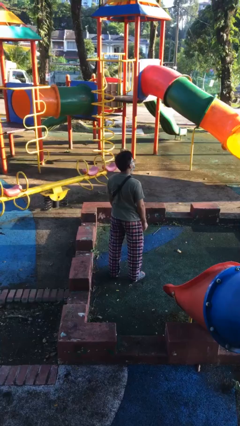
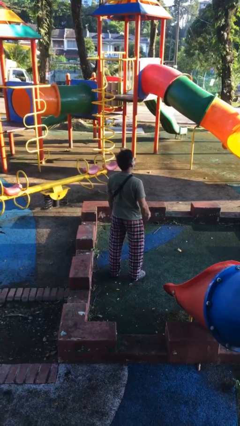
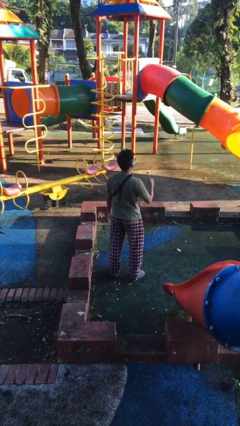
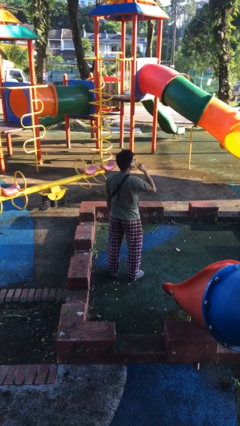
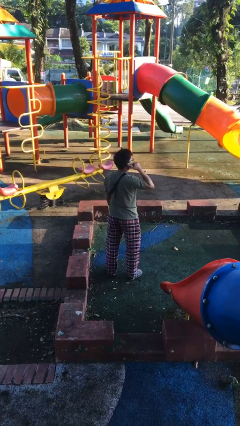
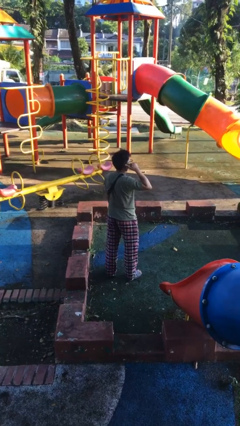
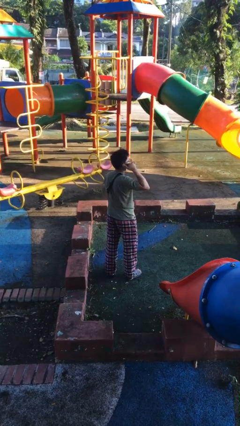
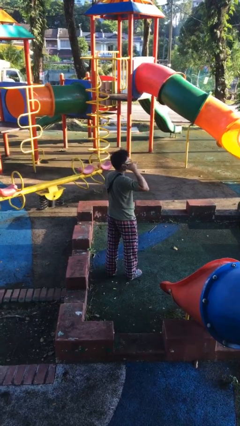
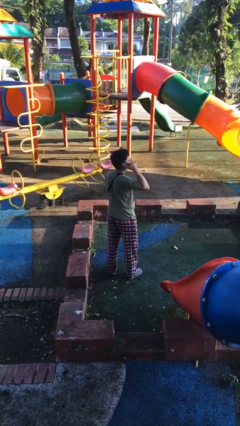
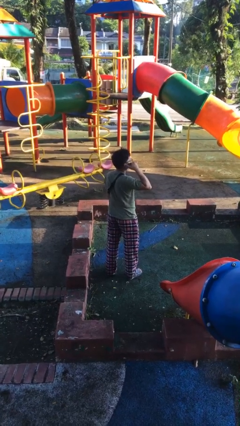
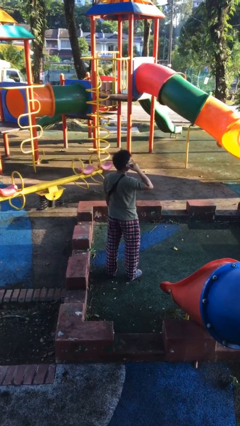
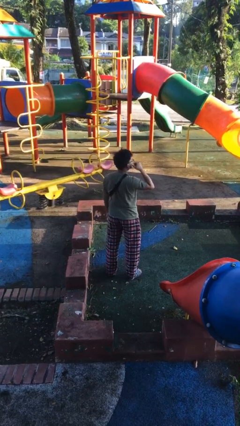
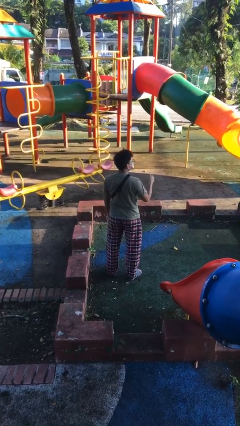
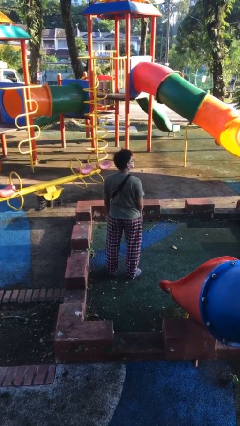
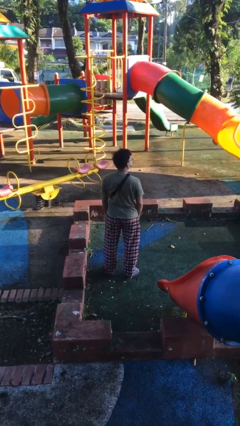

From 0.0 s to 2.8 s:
person gestures call me

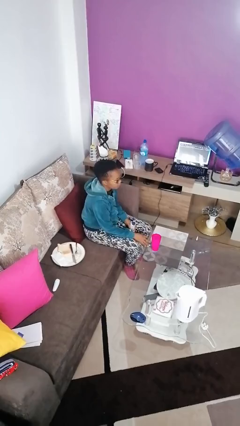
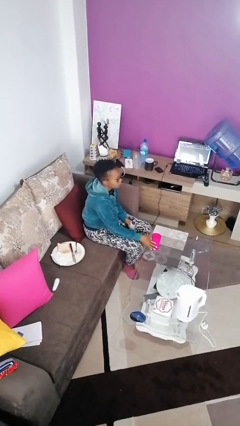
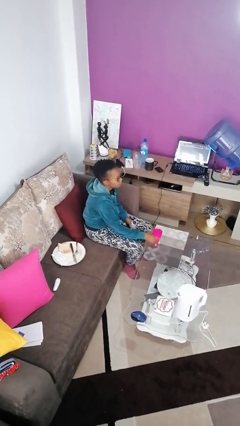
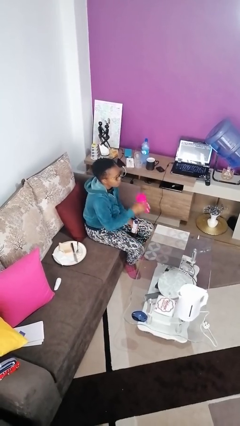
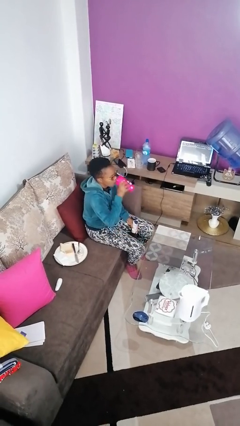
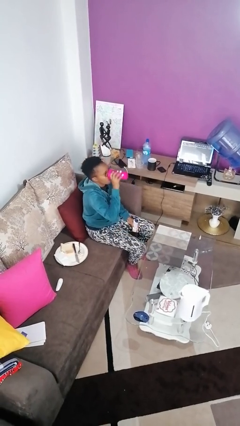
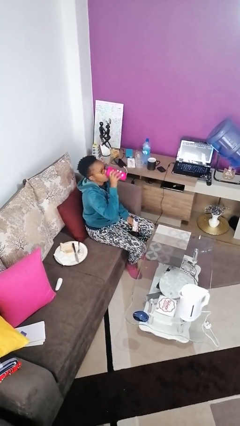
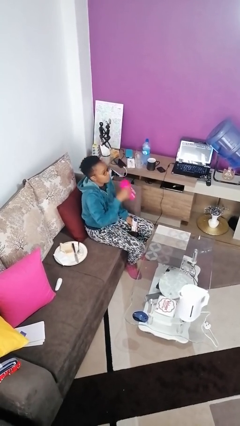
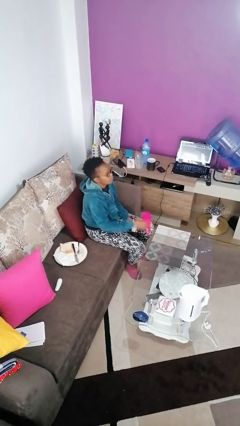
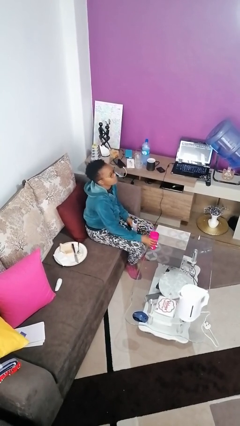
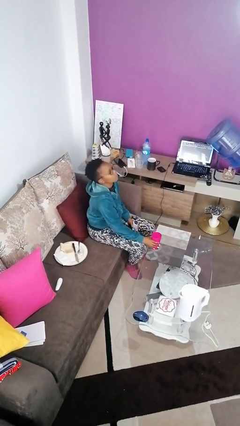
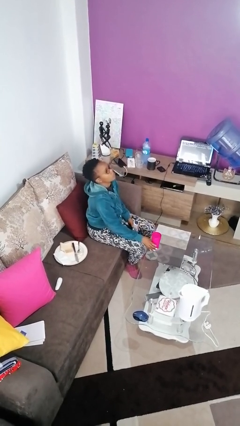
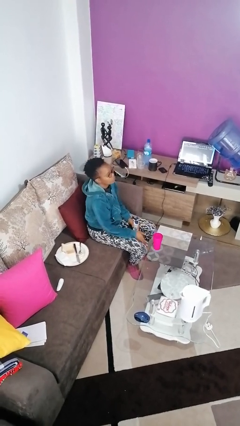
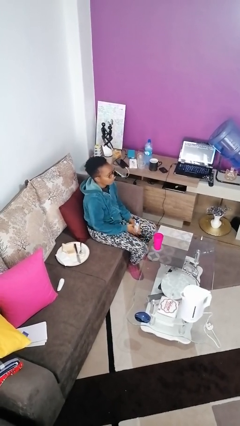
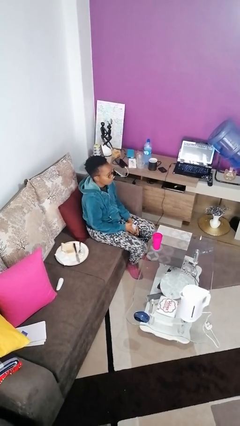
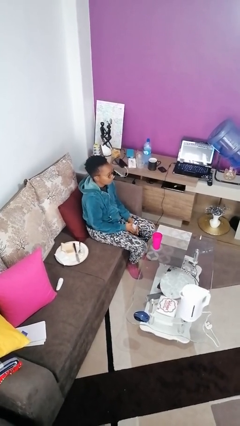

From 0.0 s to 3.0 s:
person drinks from cup

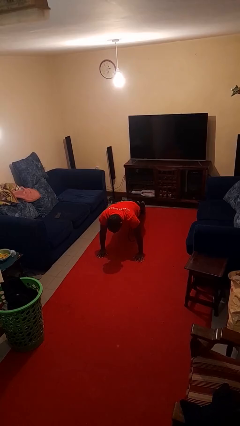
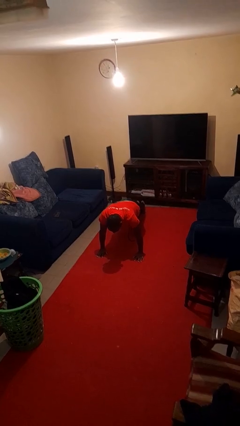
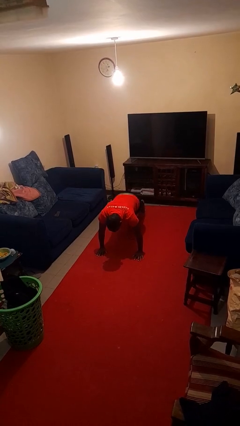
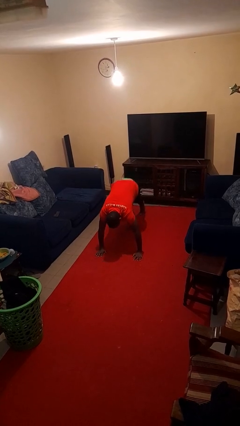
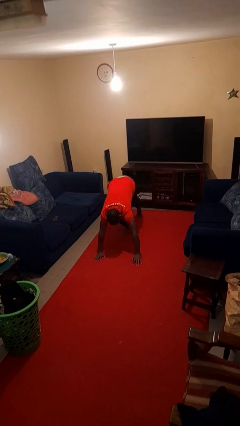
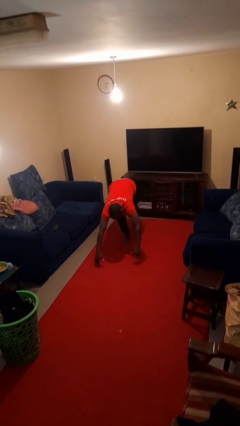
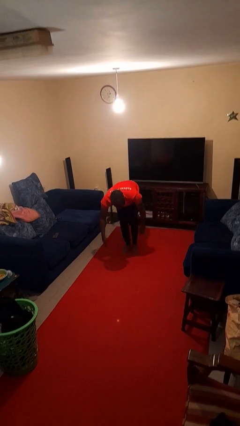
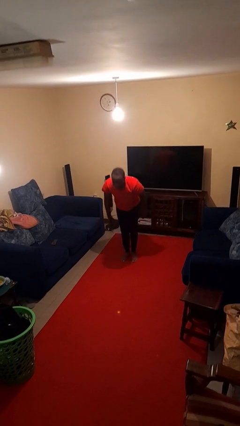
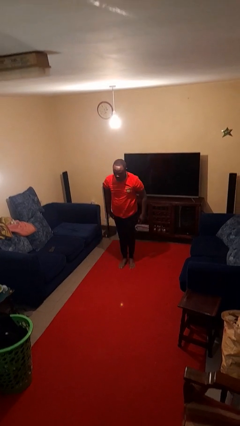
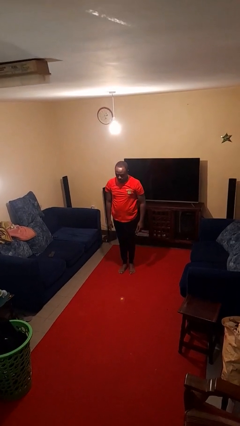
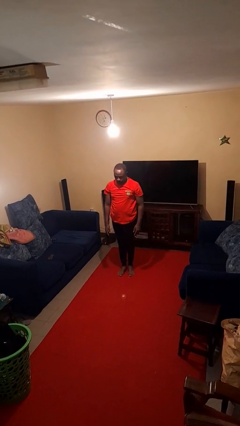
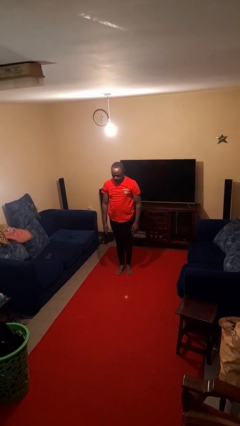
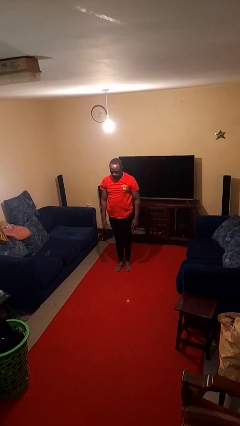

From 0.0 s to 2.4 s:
person stands up from floor

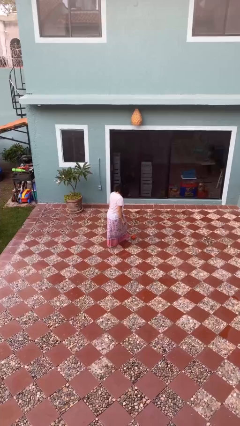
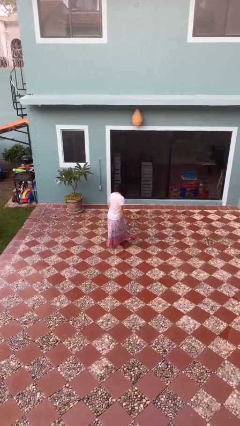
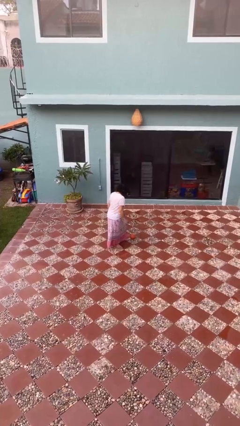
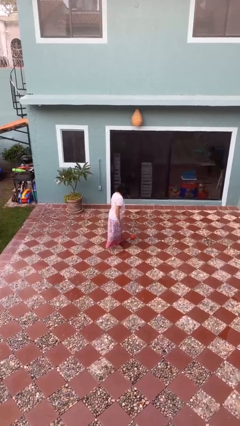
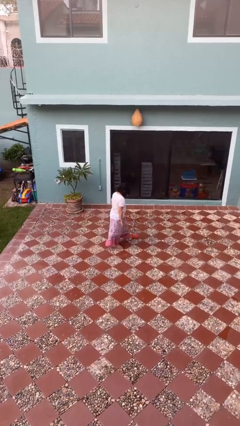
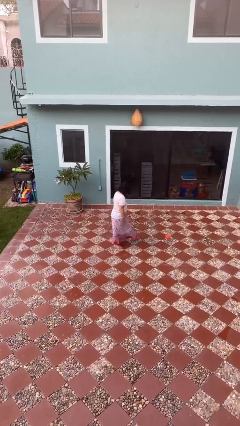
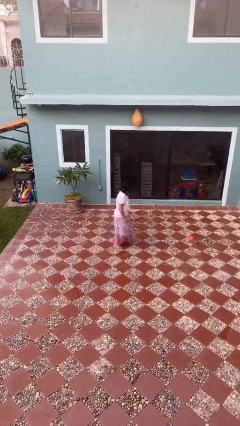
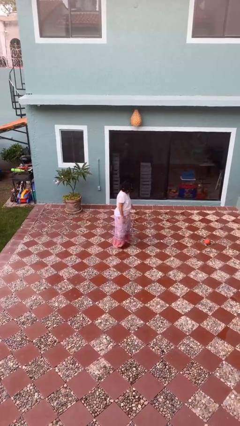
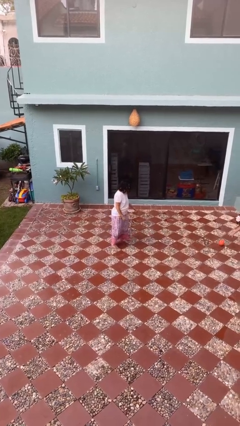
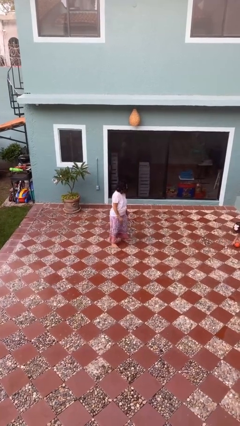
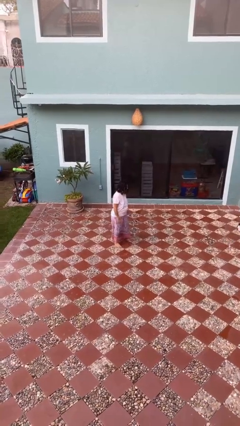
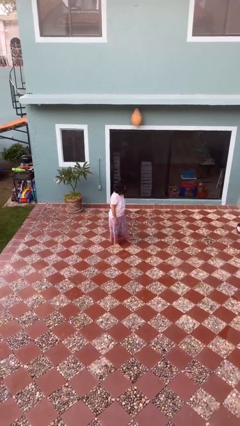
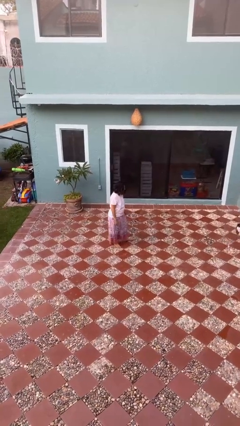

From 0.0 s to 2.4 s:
person kicks object to person

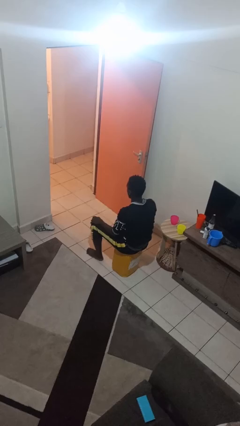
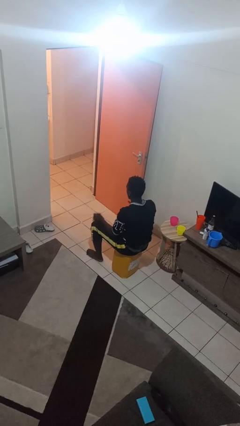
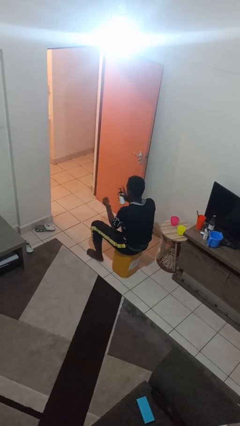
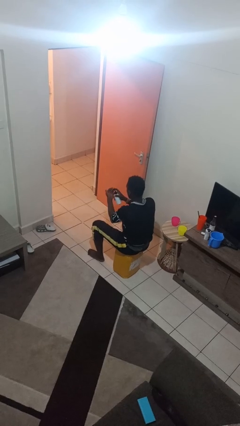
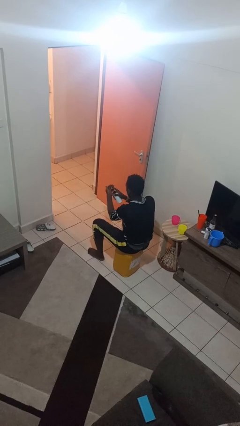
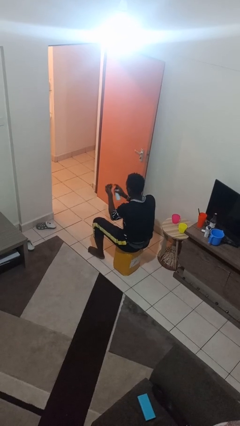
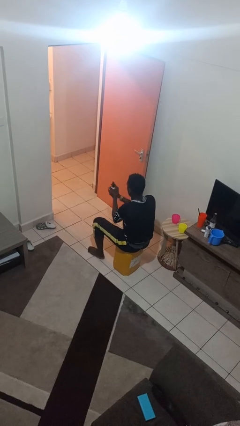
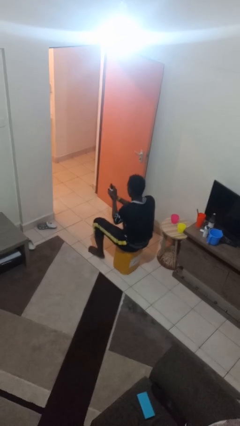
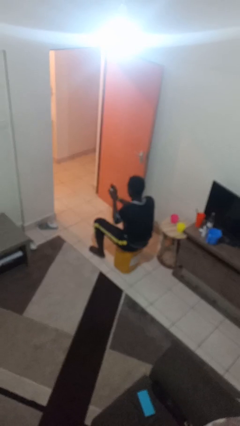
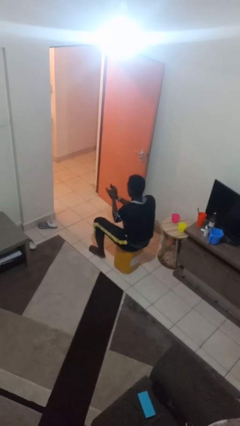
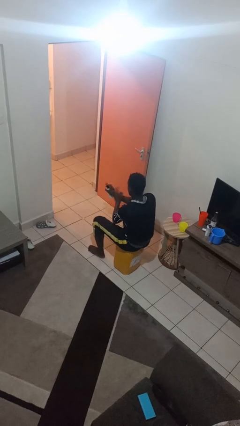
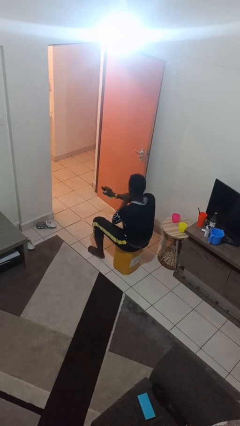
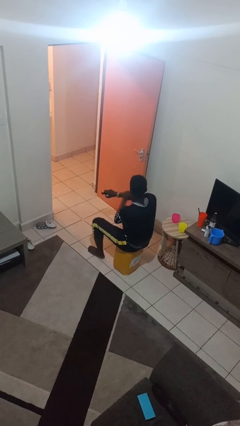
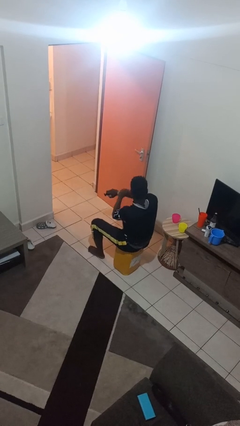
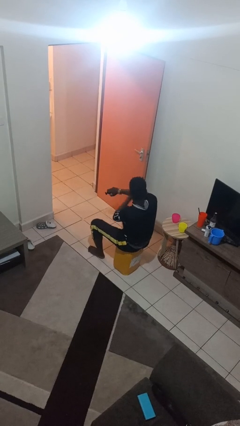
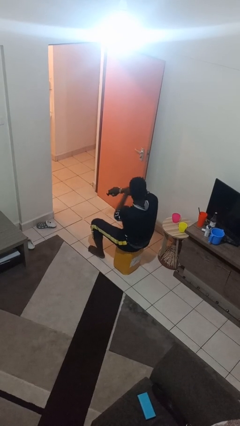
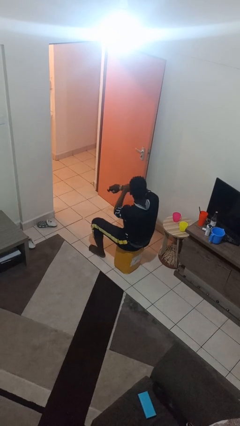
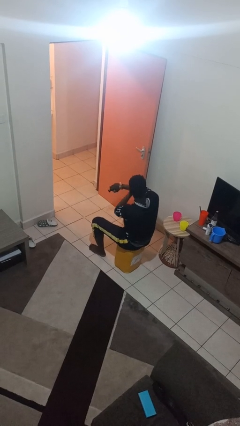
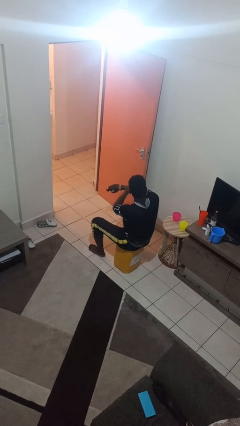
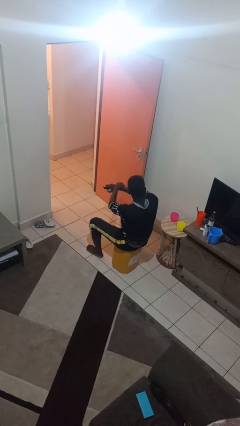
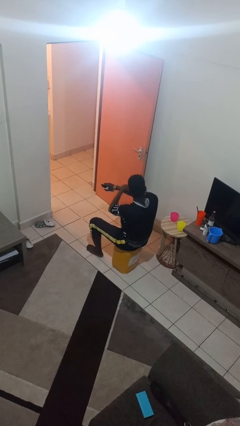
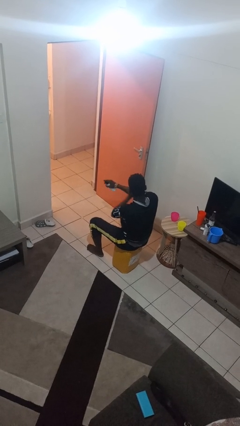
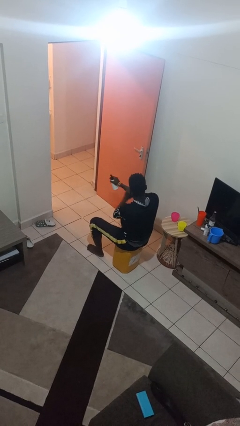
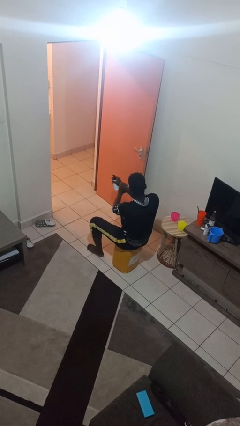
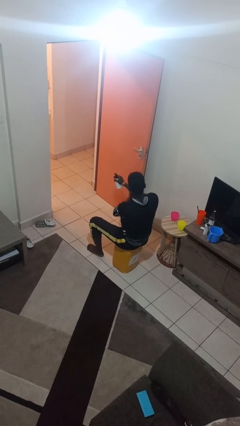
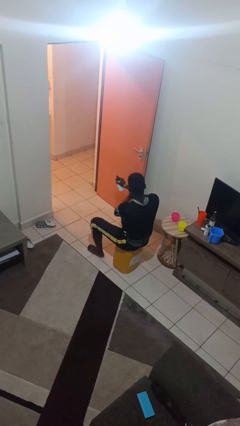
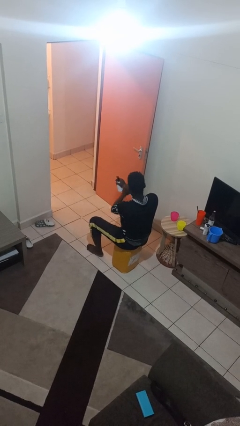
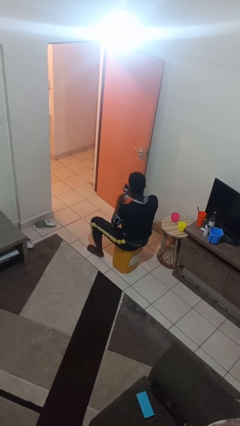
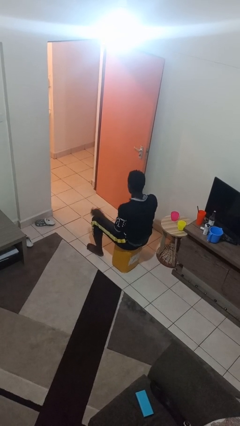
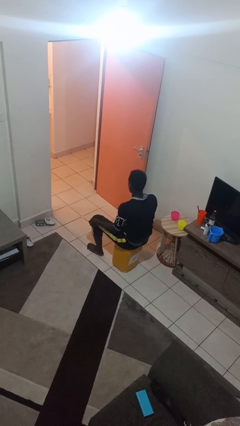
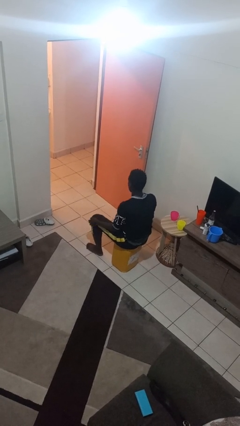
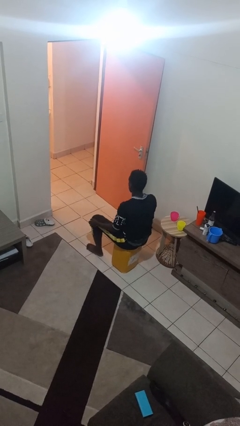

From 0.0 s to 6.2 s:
person applies sunscreen

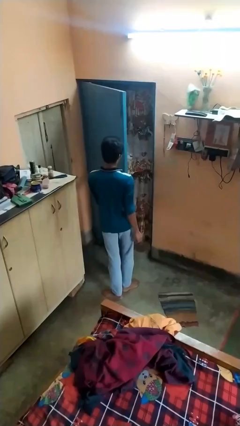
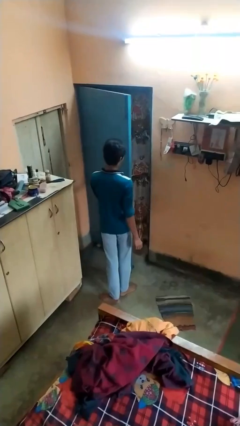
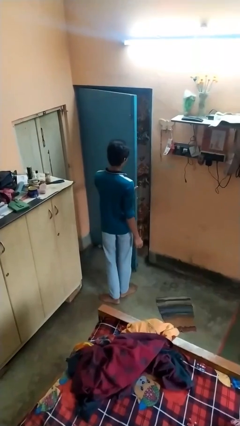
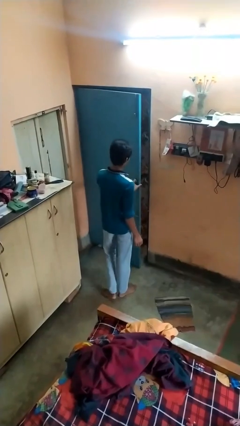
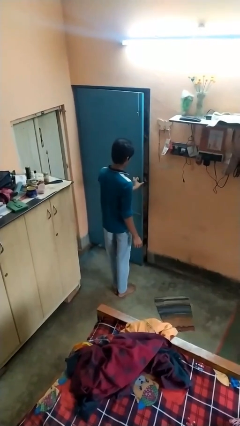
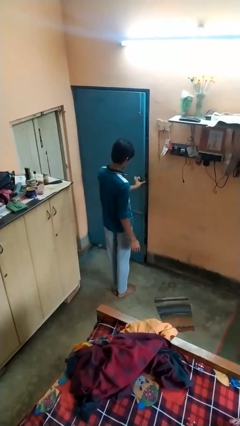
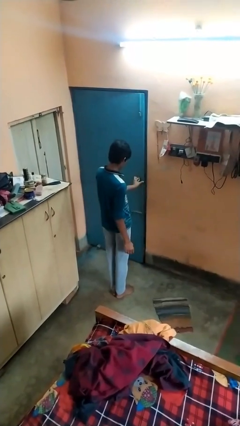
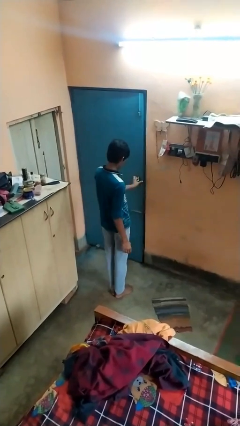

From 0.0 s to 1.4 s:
person closes facility door
